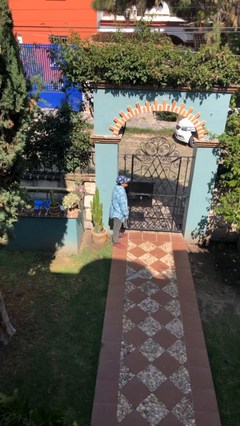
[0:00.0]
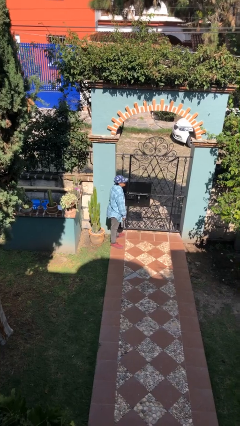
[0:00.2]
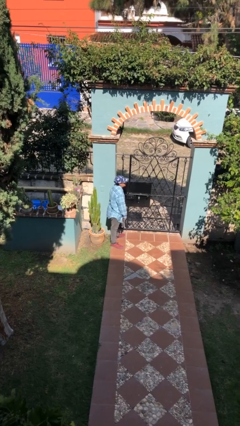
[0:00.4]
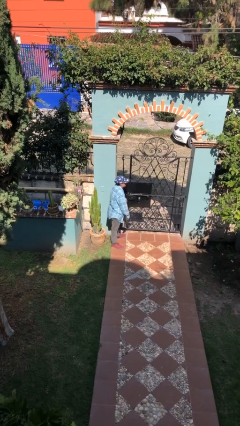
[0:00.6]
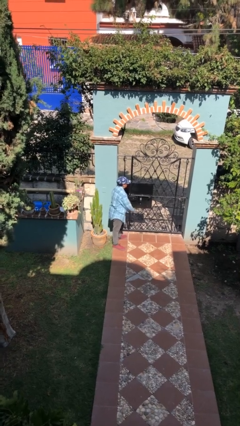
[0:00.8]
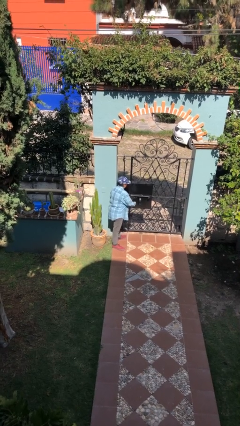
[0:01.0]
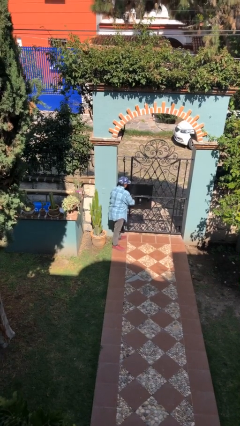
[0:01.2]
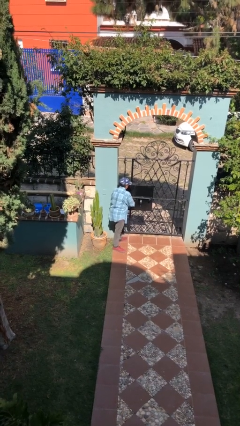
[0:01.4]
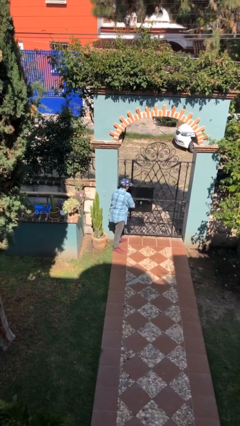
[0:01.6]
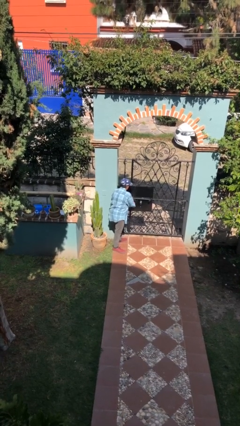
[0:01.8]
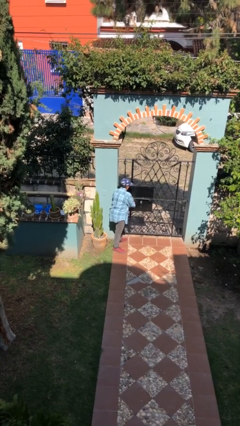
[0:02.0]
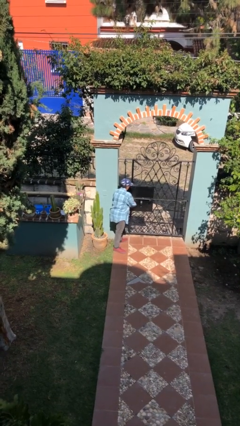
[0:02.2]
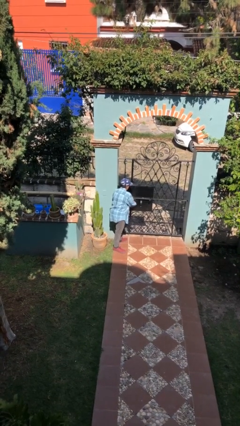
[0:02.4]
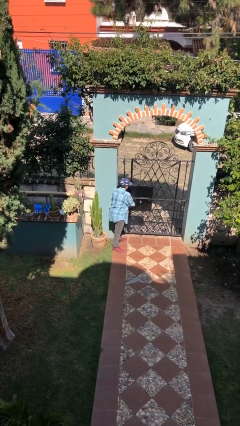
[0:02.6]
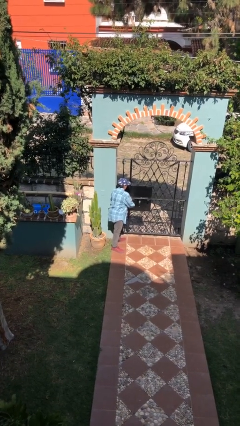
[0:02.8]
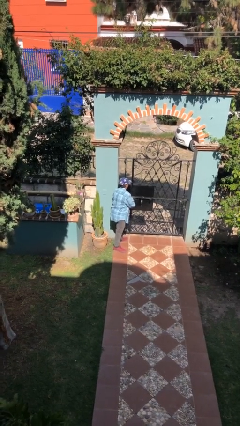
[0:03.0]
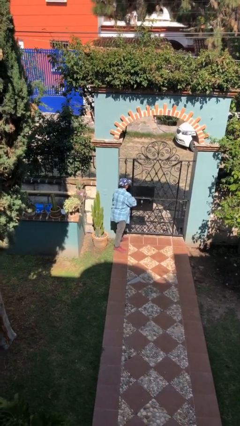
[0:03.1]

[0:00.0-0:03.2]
person unlocks door with keys

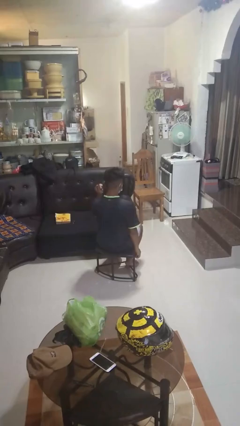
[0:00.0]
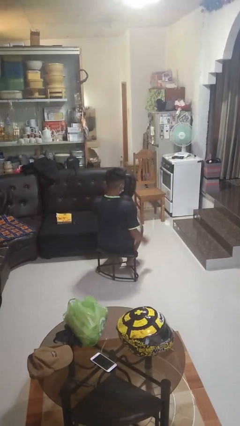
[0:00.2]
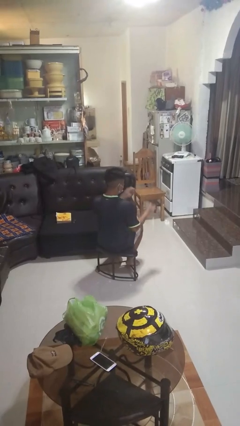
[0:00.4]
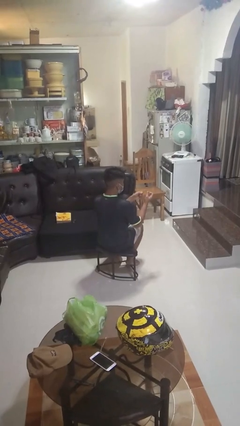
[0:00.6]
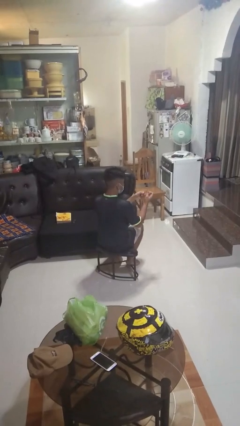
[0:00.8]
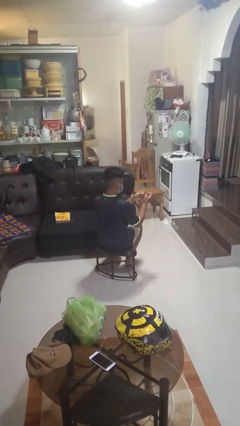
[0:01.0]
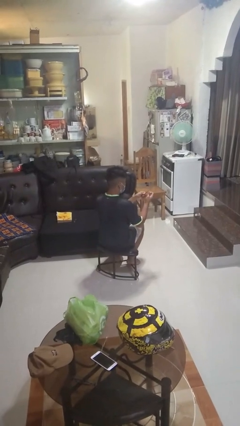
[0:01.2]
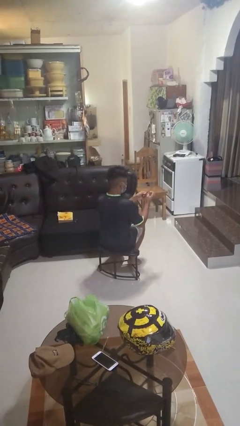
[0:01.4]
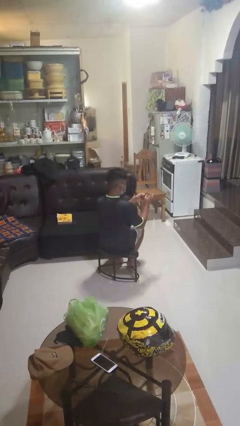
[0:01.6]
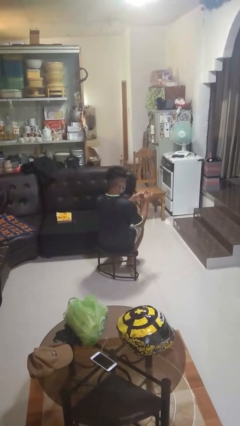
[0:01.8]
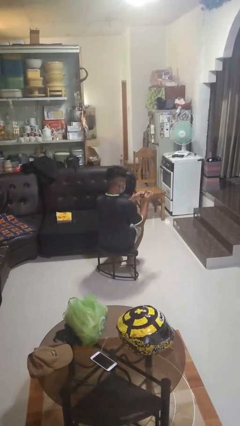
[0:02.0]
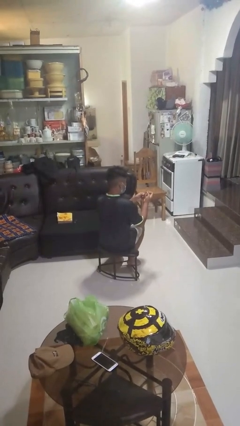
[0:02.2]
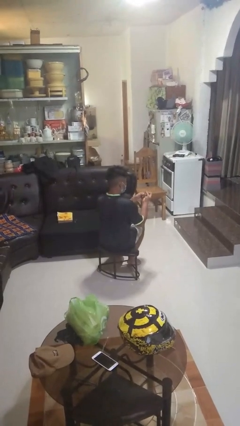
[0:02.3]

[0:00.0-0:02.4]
person files fingernails

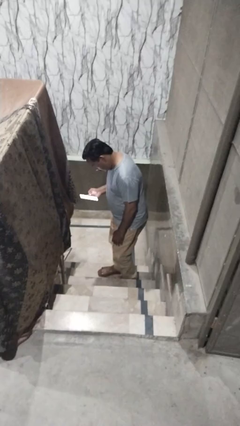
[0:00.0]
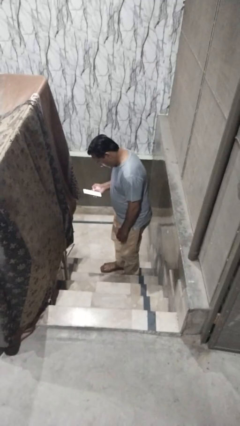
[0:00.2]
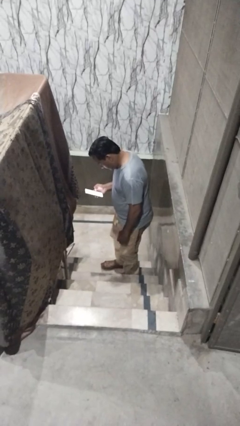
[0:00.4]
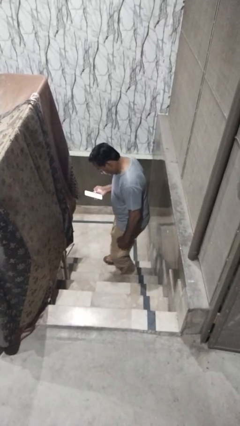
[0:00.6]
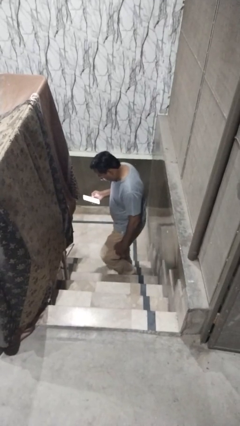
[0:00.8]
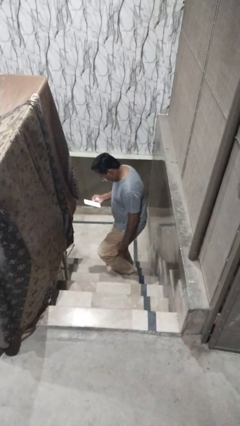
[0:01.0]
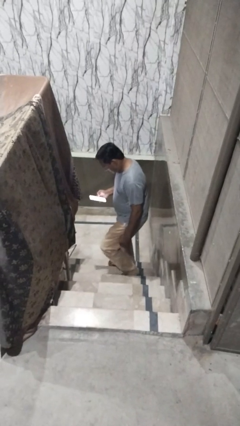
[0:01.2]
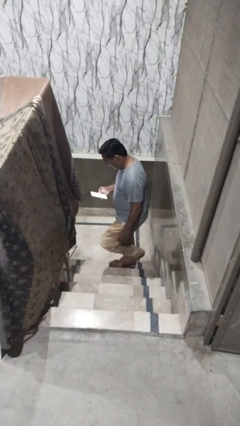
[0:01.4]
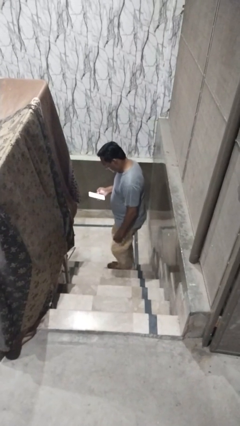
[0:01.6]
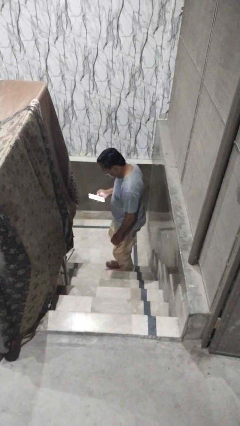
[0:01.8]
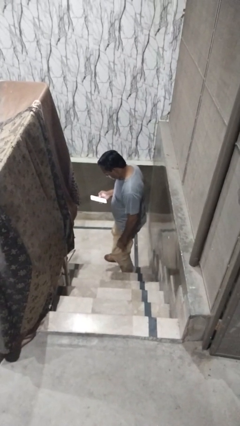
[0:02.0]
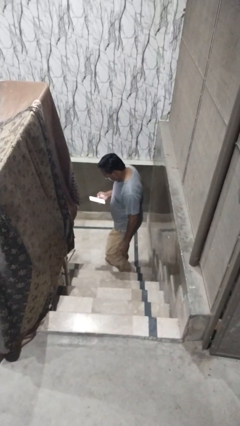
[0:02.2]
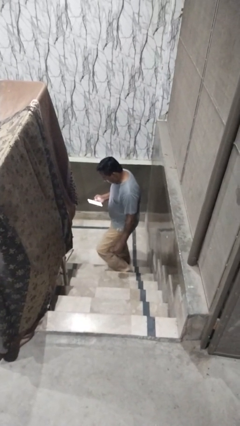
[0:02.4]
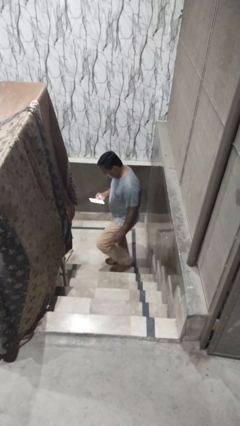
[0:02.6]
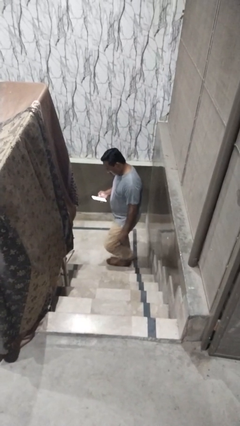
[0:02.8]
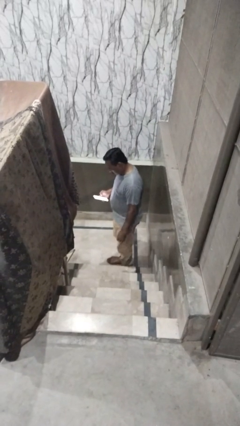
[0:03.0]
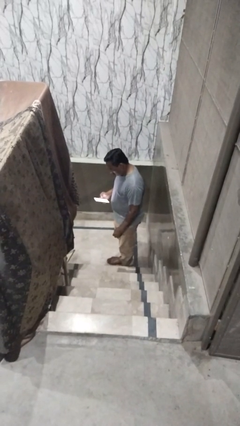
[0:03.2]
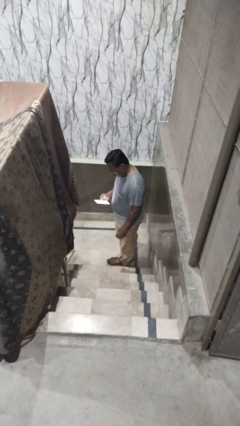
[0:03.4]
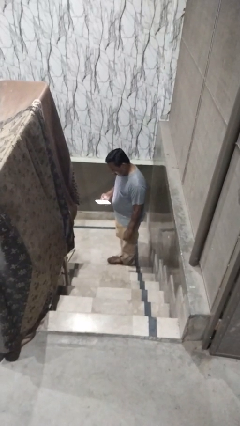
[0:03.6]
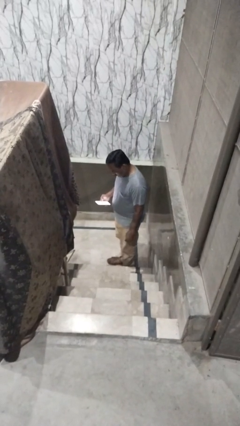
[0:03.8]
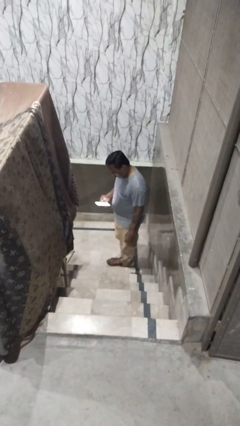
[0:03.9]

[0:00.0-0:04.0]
person climbs down stairs

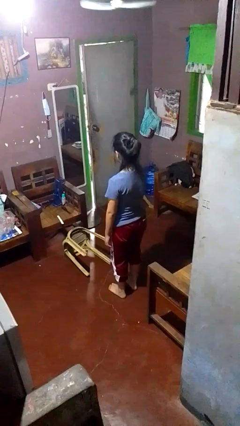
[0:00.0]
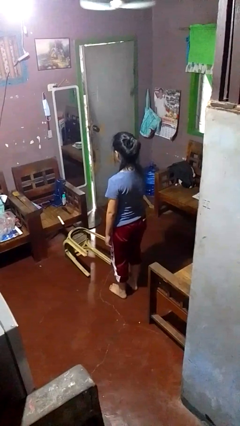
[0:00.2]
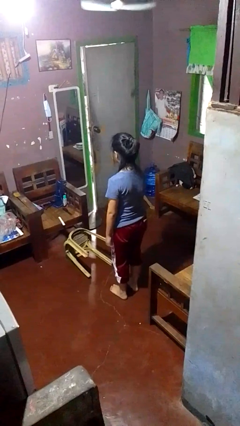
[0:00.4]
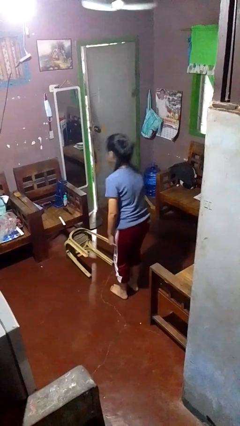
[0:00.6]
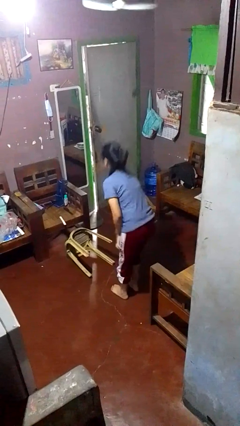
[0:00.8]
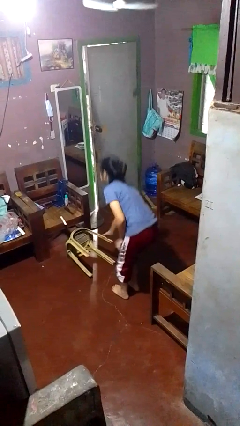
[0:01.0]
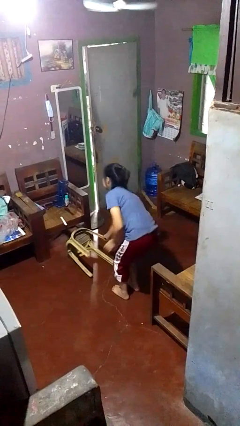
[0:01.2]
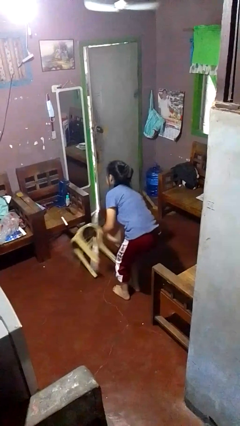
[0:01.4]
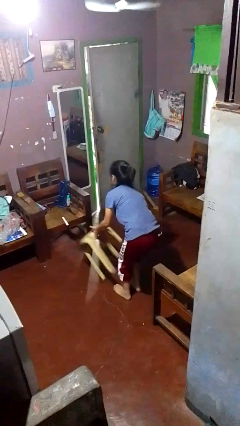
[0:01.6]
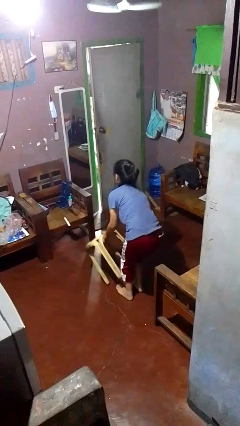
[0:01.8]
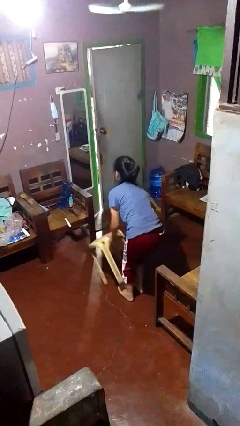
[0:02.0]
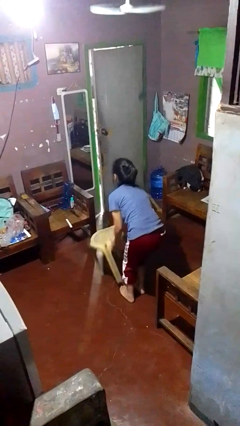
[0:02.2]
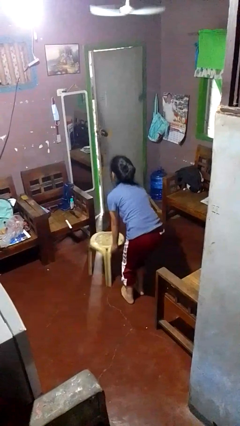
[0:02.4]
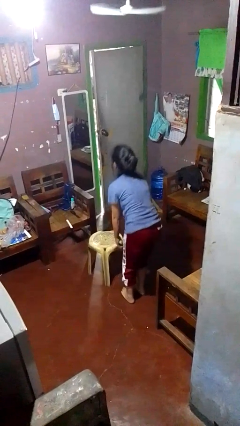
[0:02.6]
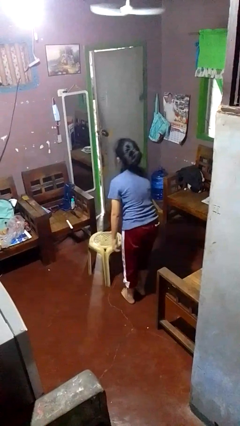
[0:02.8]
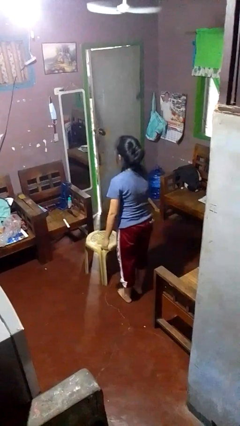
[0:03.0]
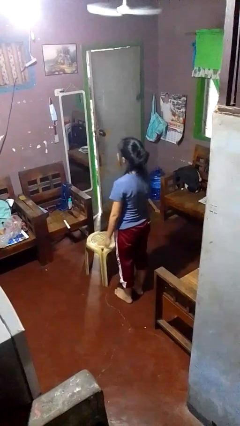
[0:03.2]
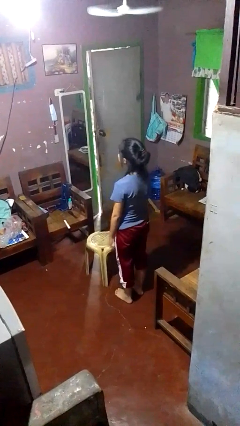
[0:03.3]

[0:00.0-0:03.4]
person sets upright furniture

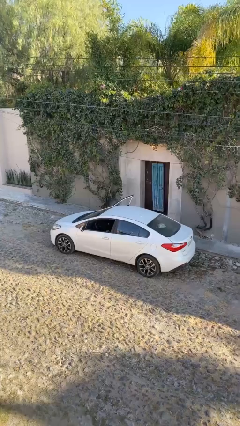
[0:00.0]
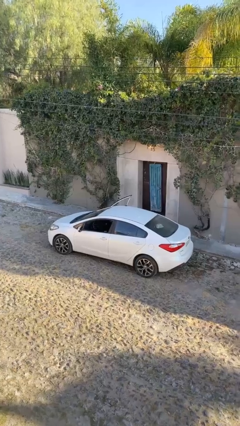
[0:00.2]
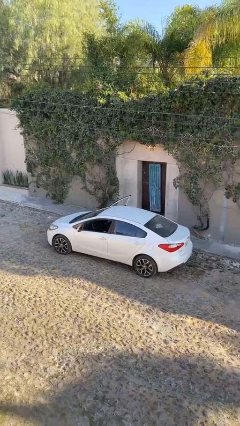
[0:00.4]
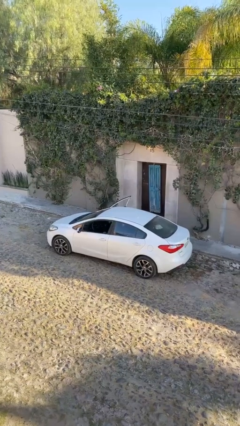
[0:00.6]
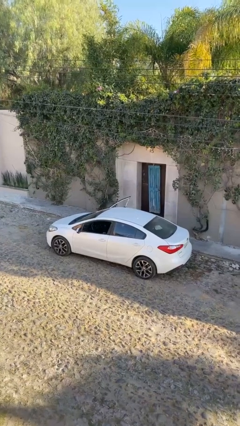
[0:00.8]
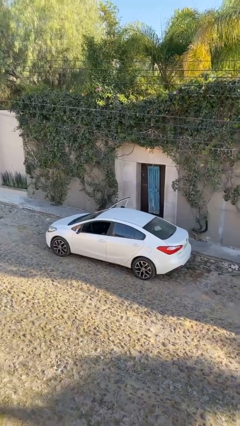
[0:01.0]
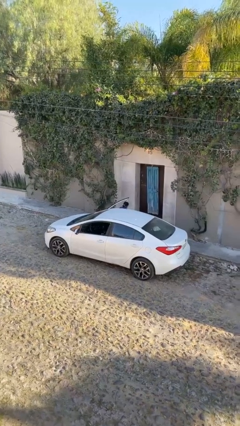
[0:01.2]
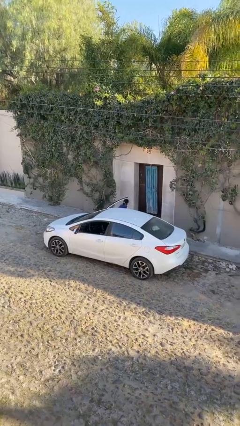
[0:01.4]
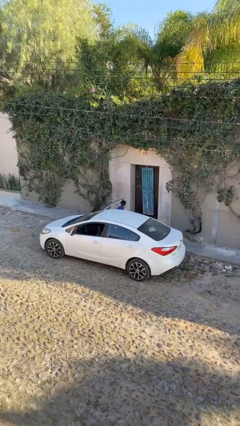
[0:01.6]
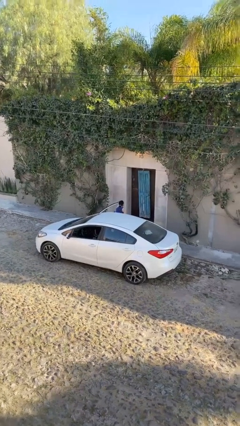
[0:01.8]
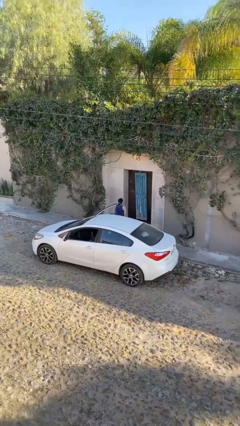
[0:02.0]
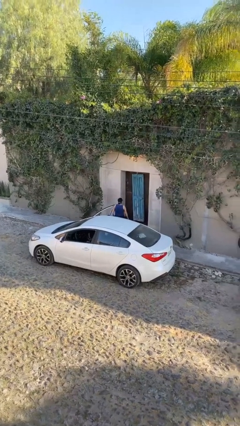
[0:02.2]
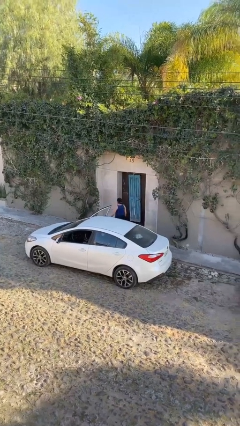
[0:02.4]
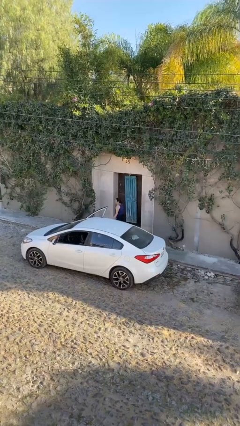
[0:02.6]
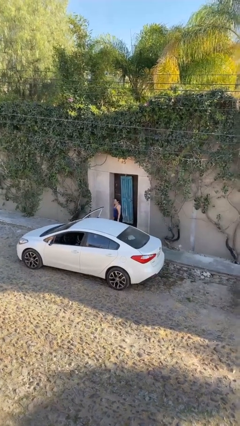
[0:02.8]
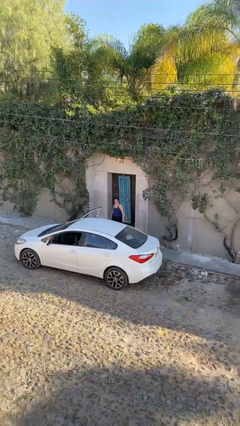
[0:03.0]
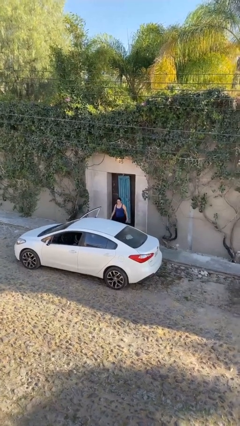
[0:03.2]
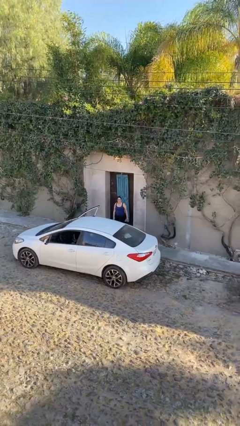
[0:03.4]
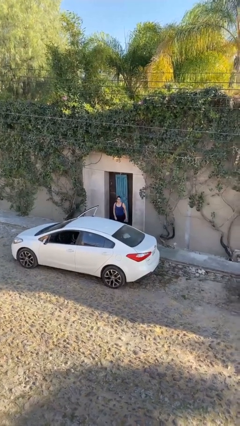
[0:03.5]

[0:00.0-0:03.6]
person exits car

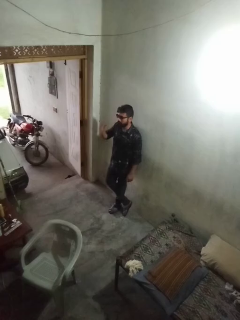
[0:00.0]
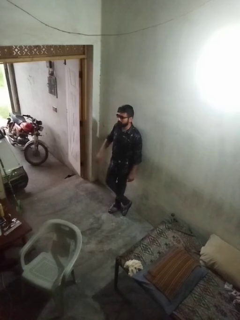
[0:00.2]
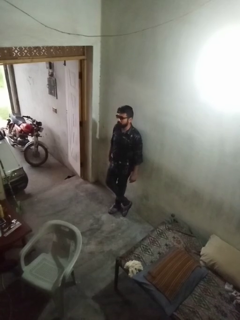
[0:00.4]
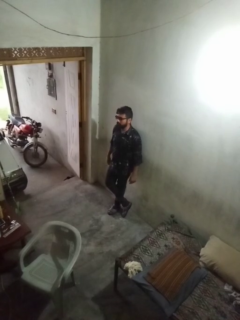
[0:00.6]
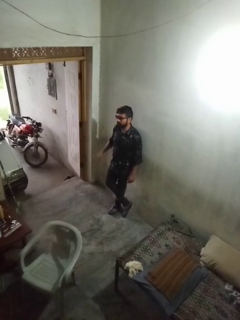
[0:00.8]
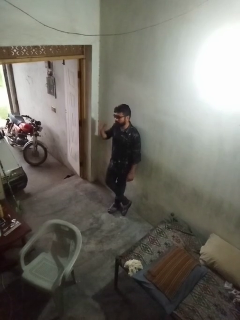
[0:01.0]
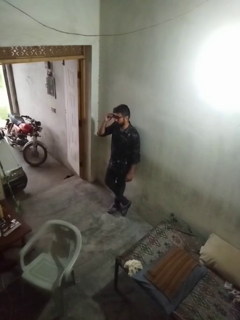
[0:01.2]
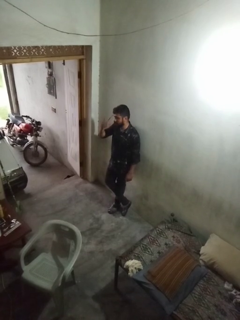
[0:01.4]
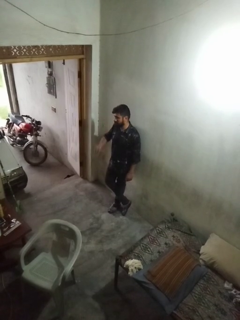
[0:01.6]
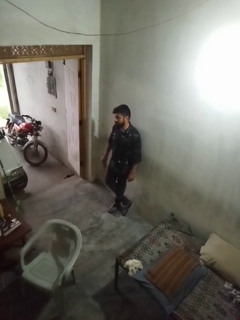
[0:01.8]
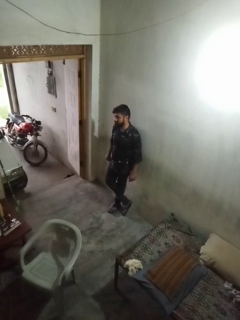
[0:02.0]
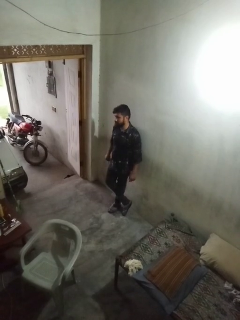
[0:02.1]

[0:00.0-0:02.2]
person takes off sunglasses
